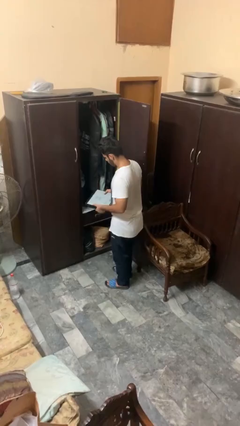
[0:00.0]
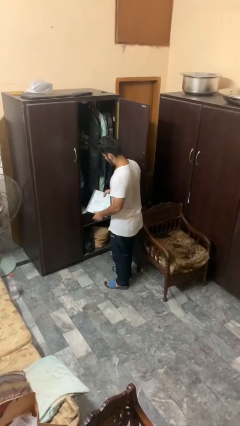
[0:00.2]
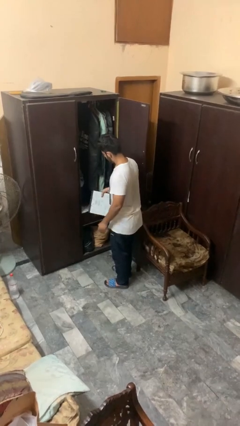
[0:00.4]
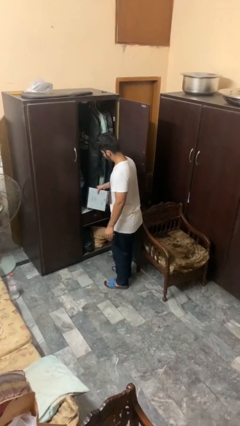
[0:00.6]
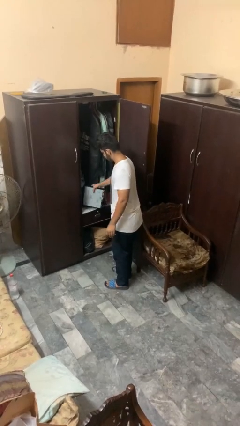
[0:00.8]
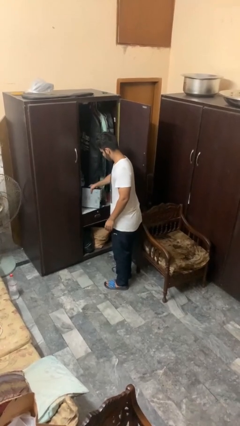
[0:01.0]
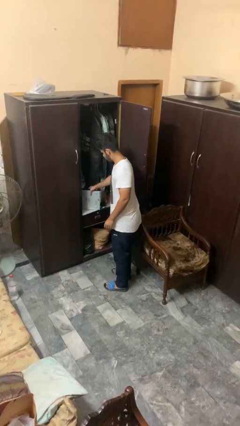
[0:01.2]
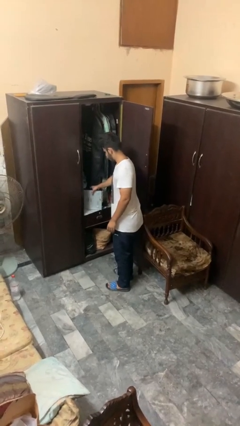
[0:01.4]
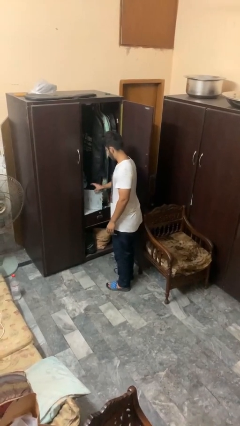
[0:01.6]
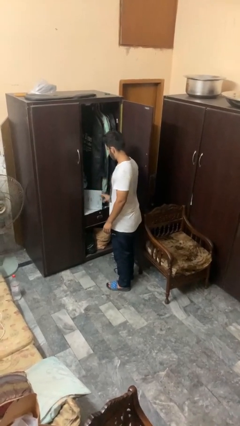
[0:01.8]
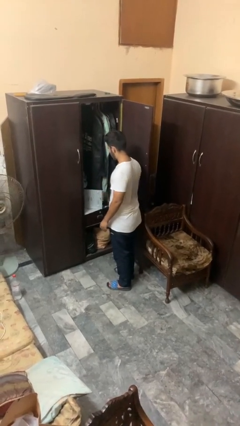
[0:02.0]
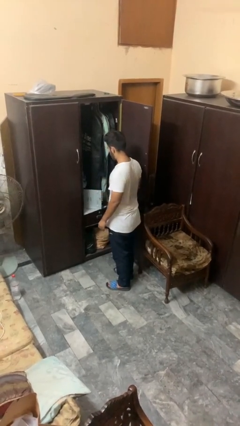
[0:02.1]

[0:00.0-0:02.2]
person puts down object into cabinet

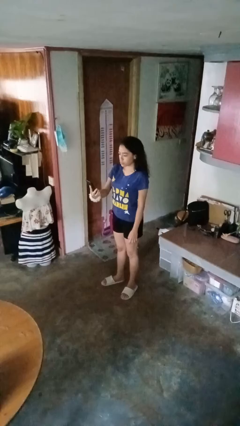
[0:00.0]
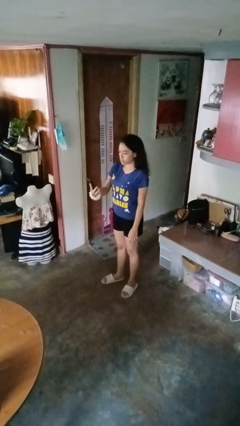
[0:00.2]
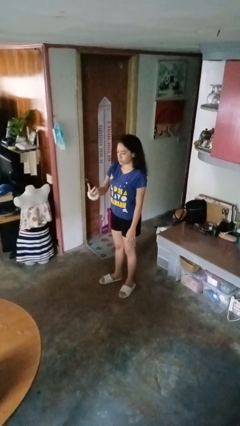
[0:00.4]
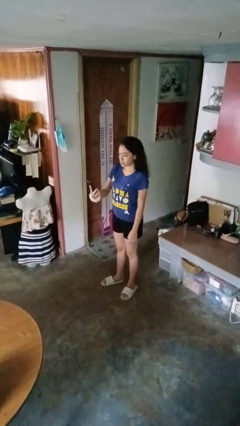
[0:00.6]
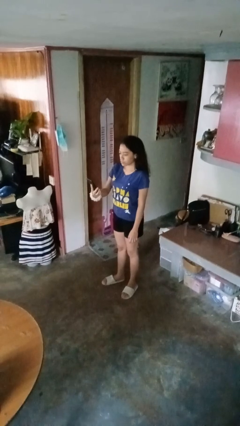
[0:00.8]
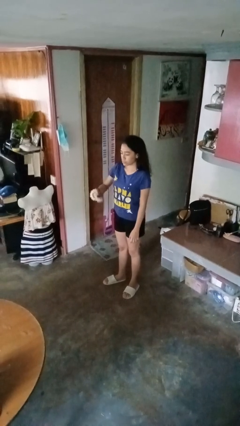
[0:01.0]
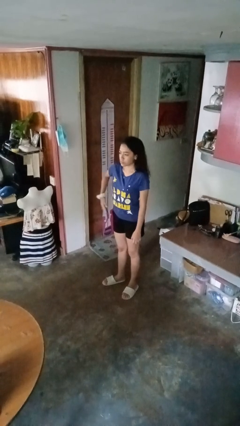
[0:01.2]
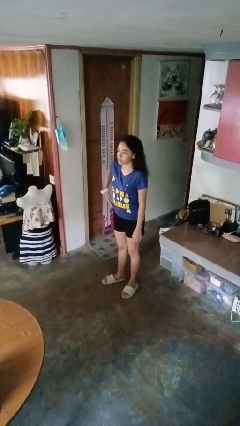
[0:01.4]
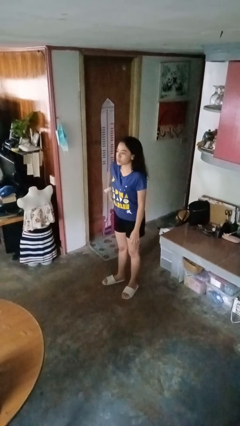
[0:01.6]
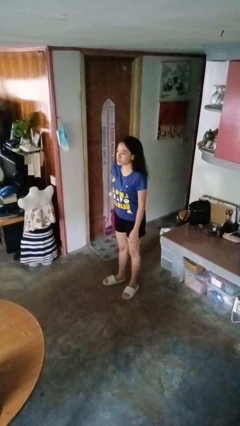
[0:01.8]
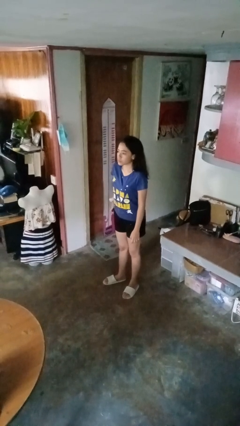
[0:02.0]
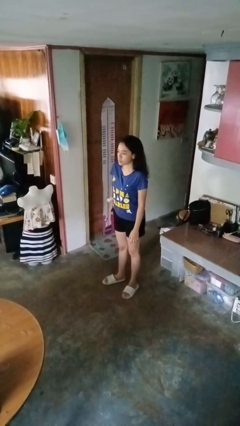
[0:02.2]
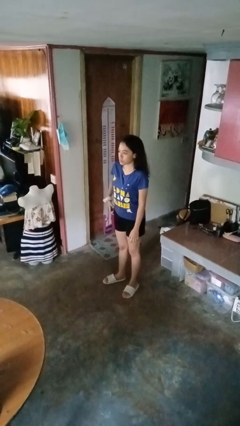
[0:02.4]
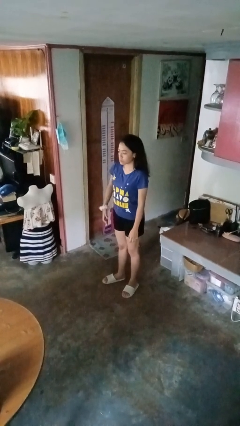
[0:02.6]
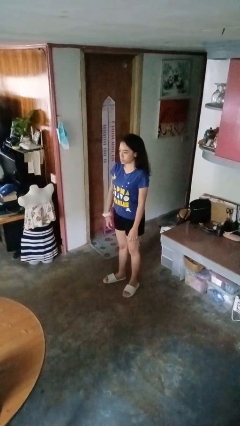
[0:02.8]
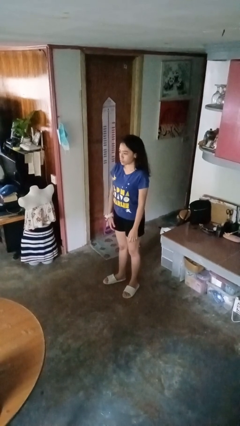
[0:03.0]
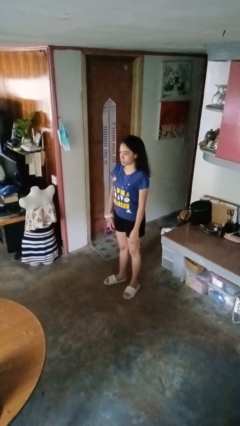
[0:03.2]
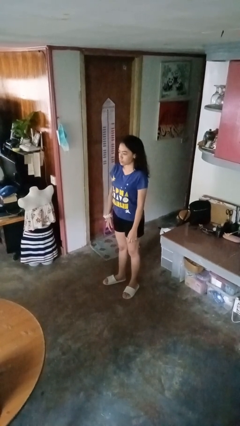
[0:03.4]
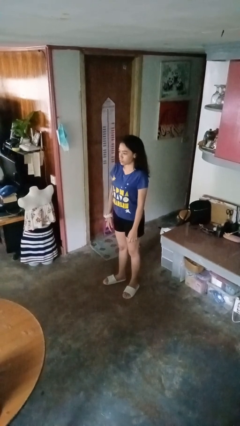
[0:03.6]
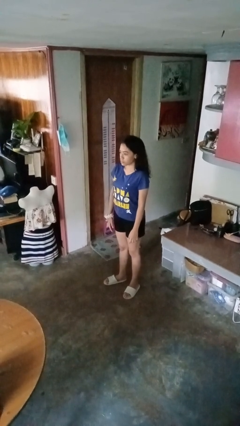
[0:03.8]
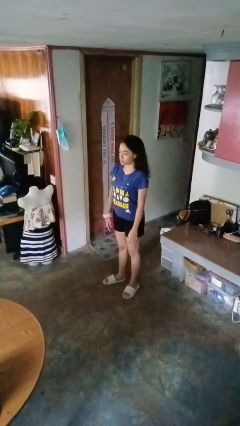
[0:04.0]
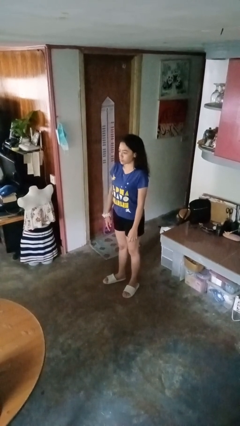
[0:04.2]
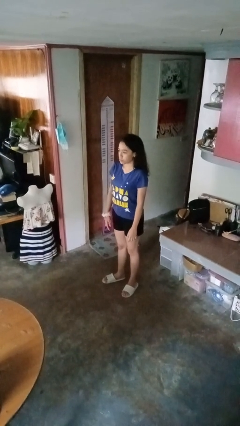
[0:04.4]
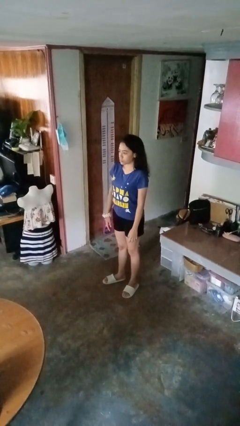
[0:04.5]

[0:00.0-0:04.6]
person puts phone into pocket

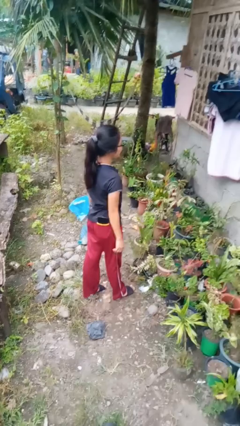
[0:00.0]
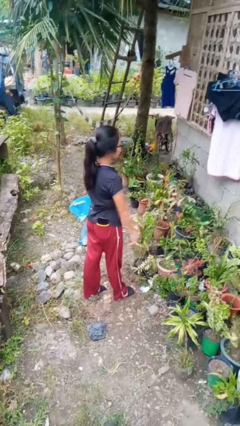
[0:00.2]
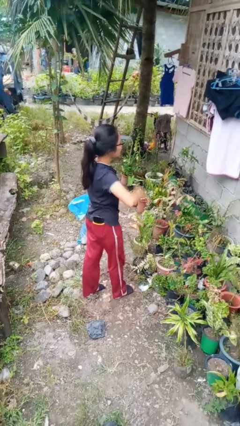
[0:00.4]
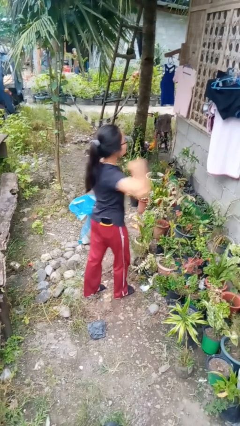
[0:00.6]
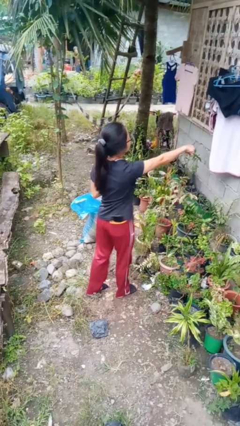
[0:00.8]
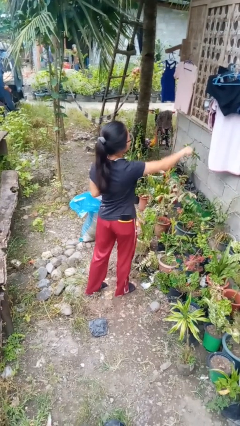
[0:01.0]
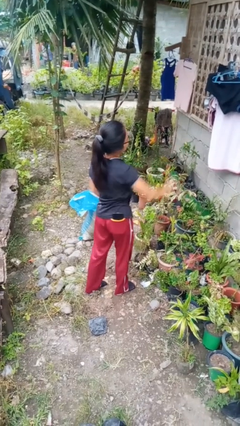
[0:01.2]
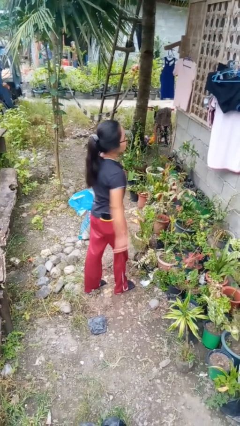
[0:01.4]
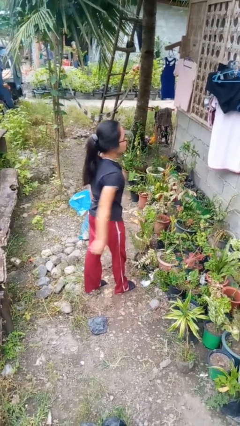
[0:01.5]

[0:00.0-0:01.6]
person punches

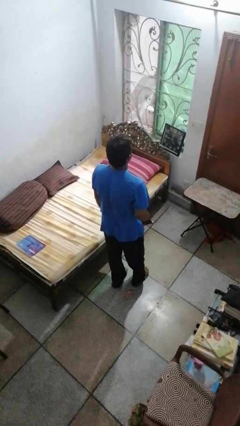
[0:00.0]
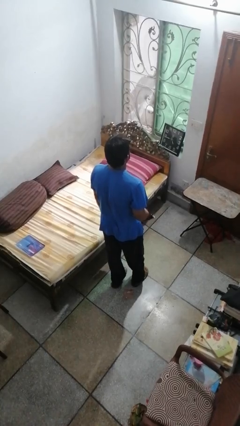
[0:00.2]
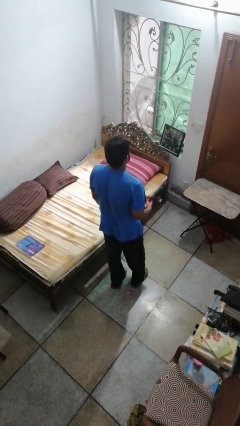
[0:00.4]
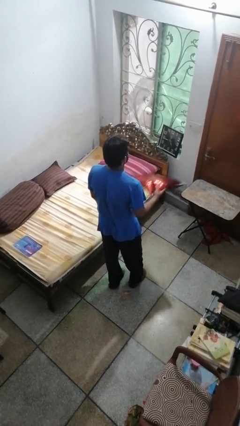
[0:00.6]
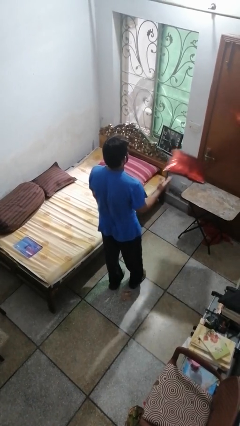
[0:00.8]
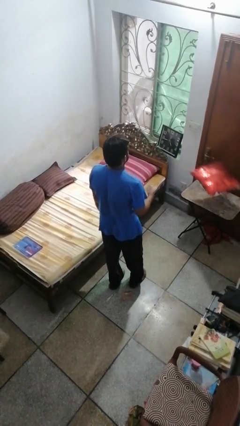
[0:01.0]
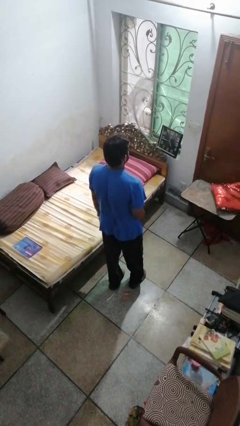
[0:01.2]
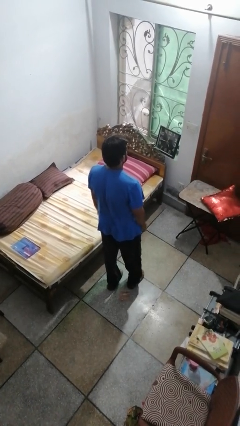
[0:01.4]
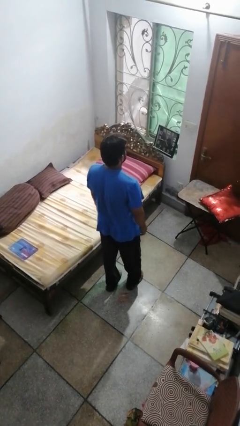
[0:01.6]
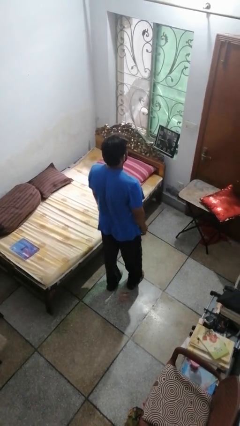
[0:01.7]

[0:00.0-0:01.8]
person throws object on table

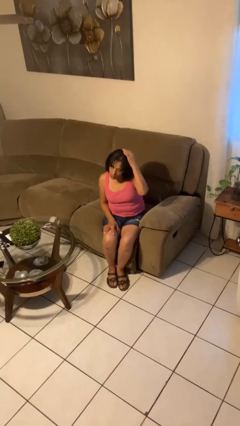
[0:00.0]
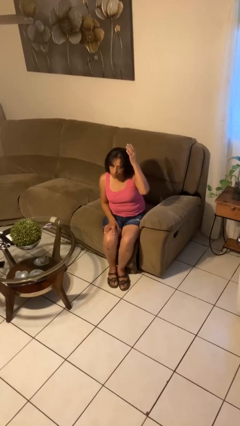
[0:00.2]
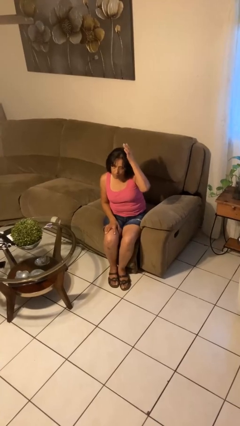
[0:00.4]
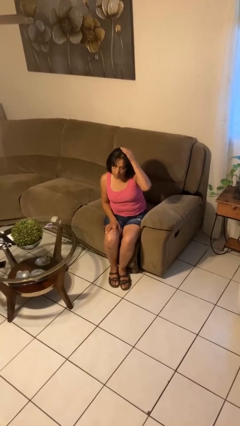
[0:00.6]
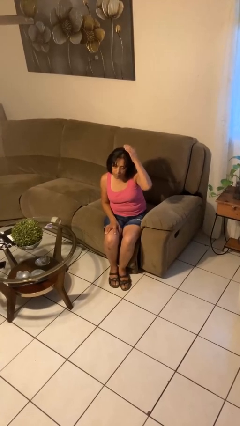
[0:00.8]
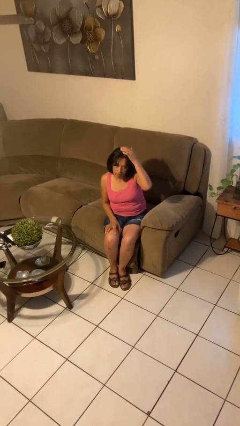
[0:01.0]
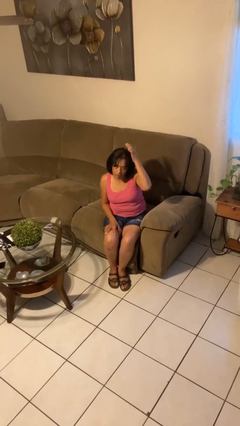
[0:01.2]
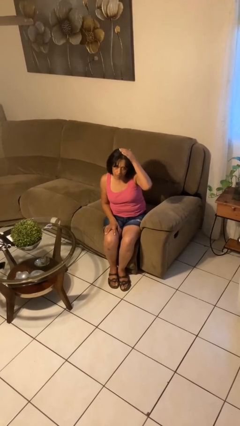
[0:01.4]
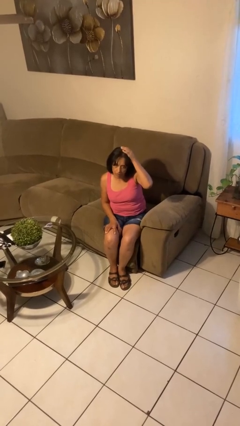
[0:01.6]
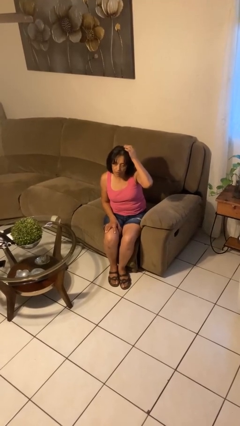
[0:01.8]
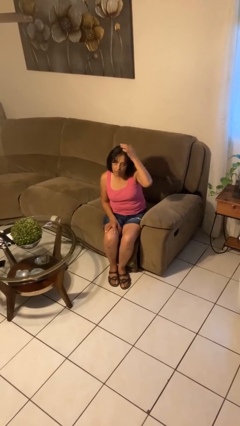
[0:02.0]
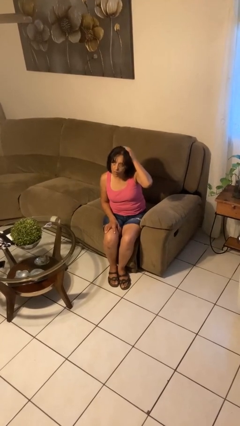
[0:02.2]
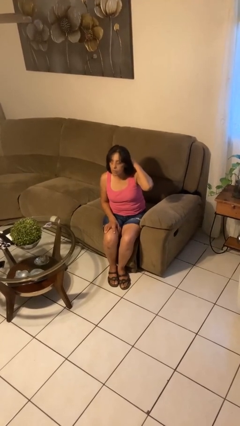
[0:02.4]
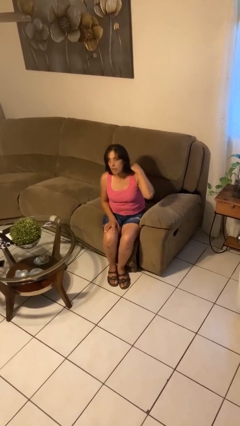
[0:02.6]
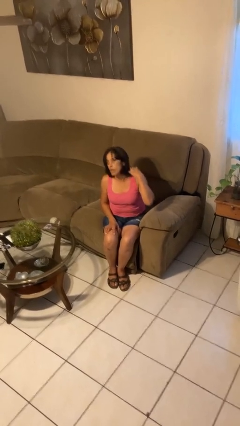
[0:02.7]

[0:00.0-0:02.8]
person pats head

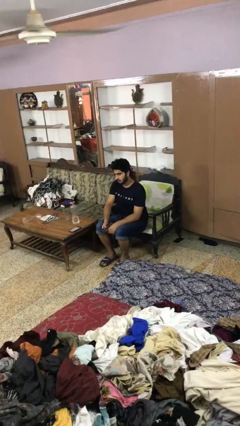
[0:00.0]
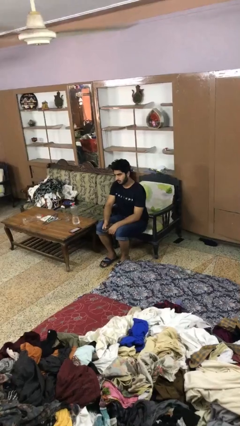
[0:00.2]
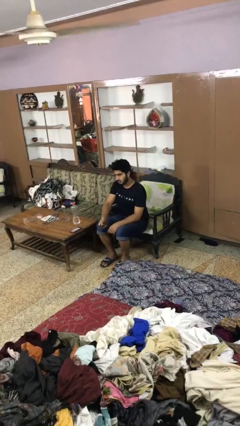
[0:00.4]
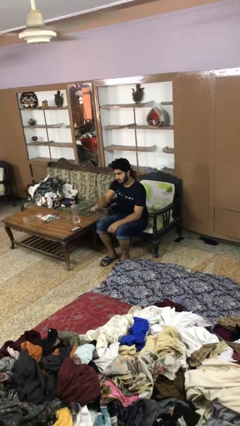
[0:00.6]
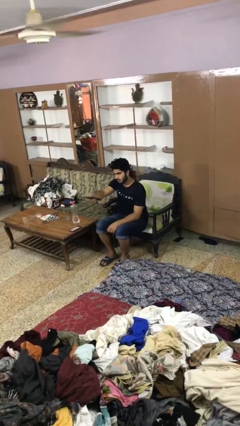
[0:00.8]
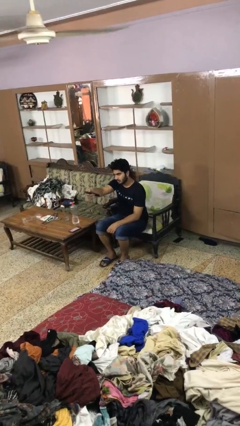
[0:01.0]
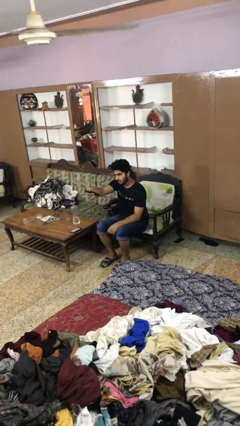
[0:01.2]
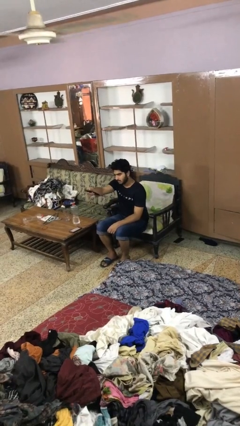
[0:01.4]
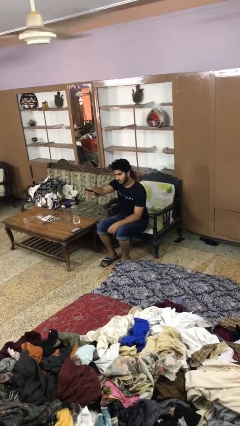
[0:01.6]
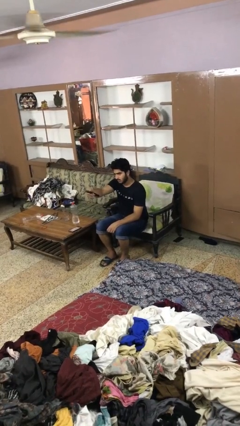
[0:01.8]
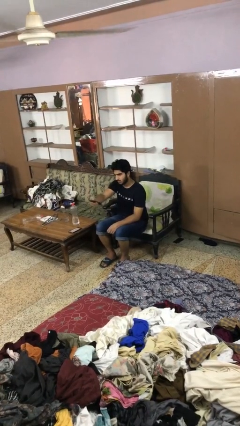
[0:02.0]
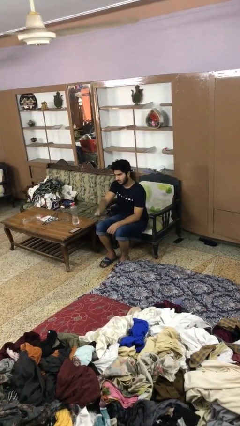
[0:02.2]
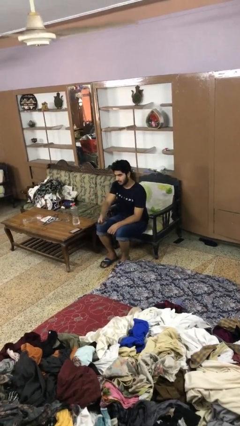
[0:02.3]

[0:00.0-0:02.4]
person uses television remote

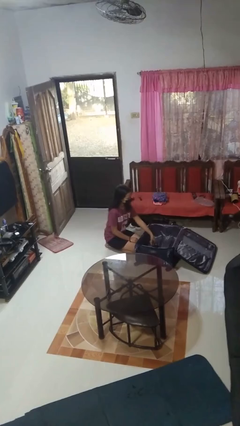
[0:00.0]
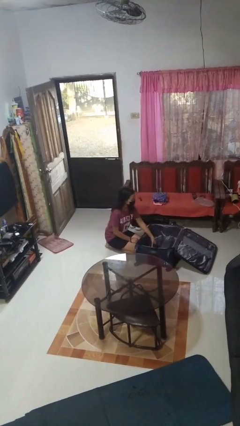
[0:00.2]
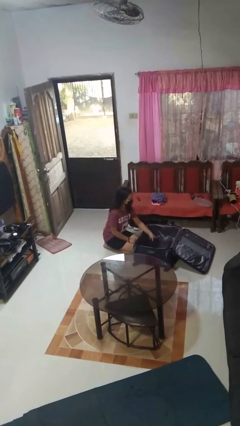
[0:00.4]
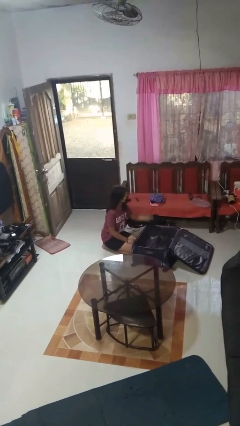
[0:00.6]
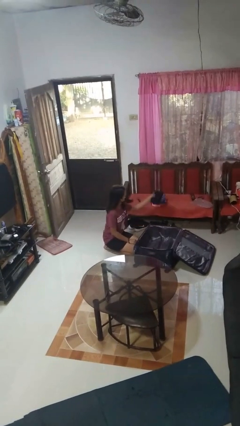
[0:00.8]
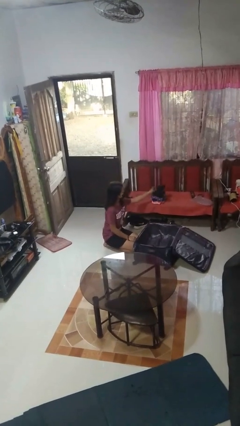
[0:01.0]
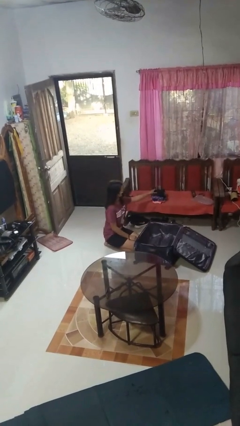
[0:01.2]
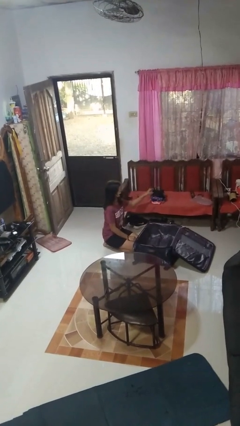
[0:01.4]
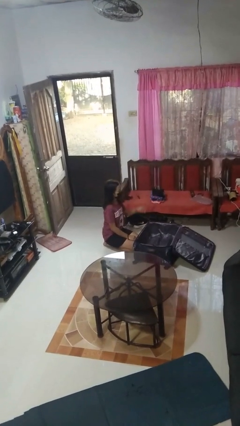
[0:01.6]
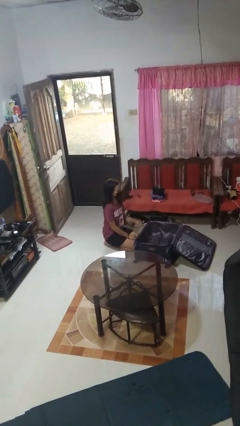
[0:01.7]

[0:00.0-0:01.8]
person unloads clothes from suitcase
